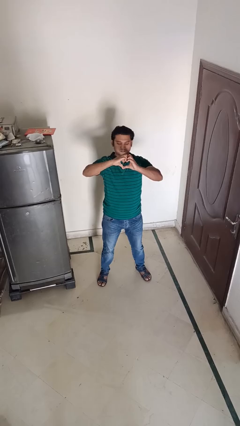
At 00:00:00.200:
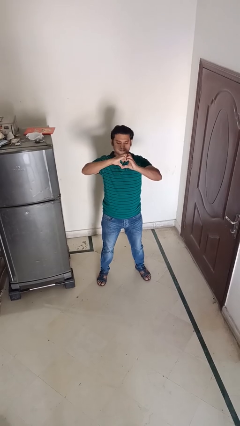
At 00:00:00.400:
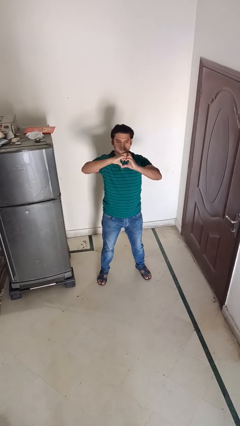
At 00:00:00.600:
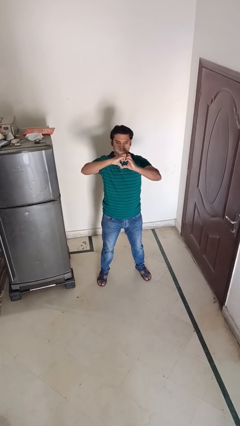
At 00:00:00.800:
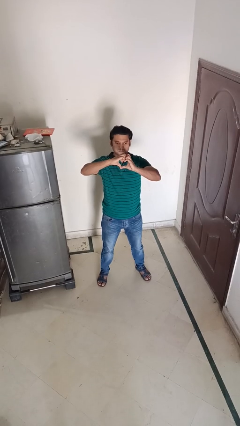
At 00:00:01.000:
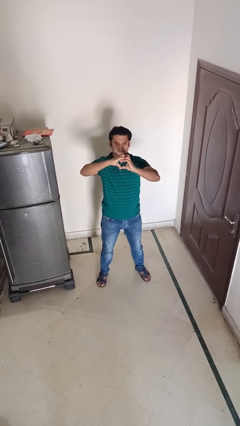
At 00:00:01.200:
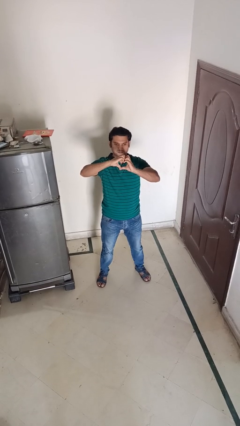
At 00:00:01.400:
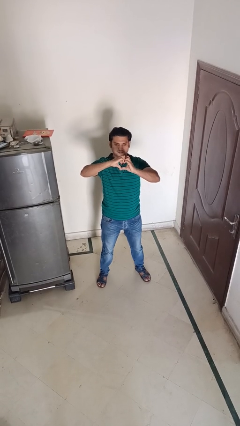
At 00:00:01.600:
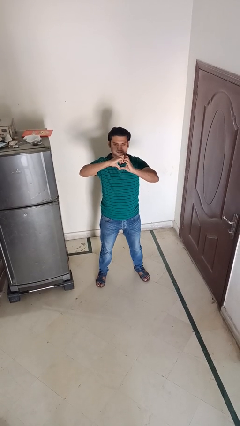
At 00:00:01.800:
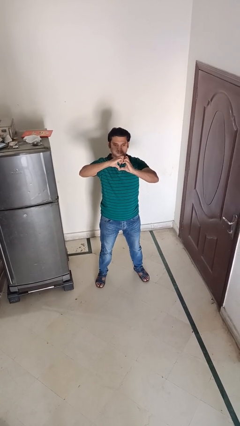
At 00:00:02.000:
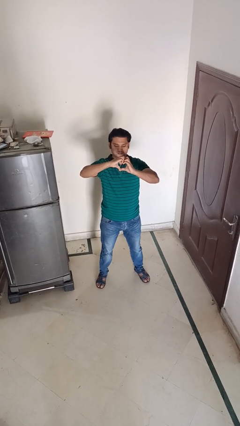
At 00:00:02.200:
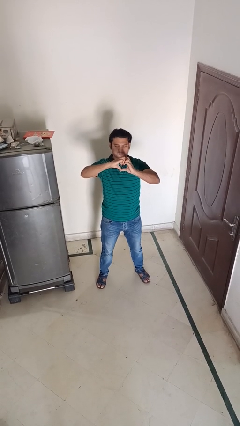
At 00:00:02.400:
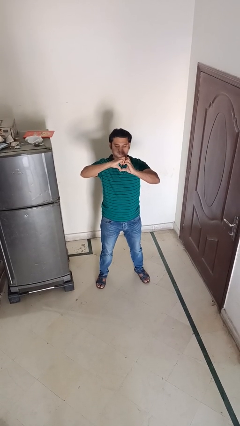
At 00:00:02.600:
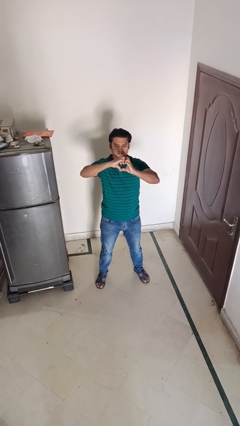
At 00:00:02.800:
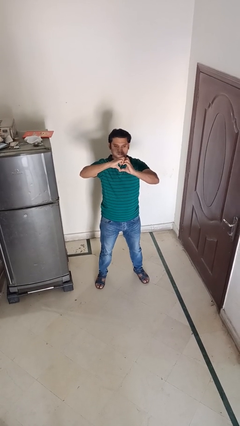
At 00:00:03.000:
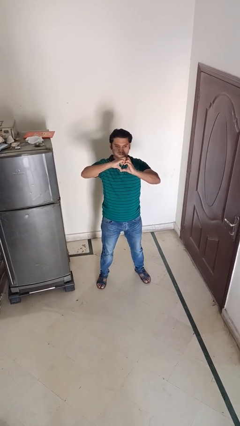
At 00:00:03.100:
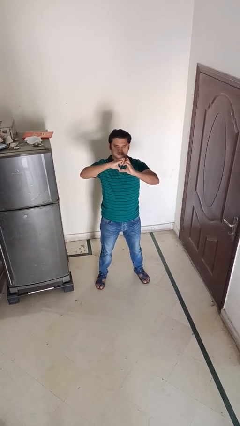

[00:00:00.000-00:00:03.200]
person gestures heart

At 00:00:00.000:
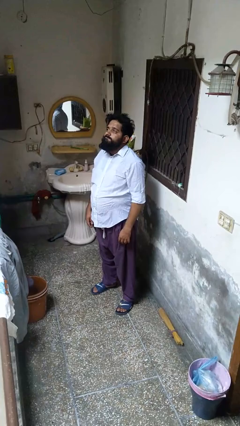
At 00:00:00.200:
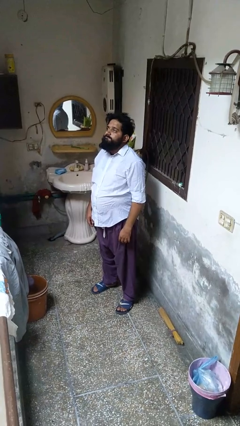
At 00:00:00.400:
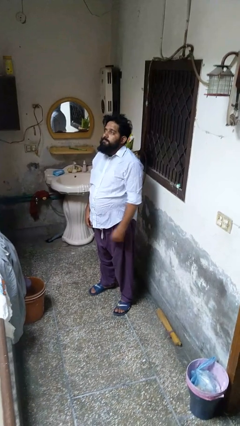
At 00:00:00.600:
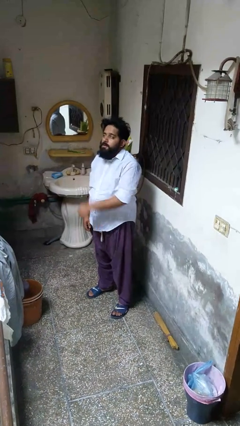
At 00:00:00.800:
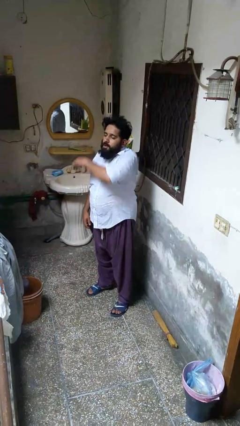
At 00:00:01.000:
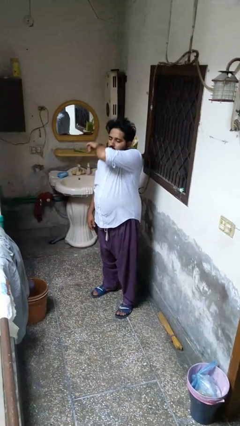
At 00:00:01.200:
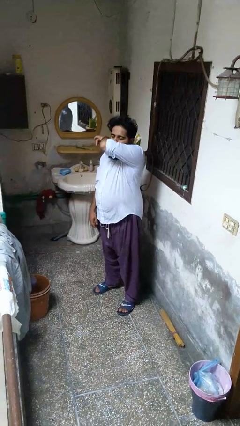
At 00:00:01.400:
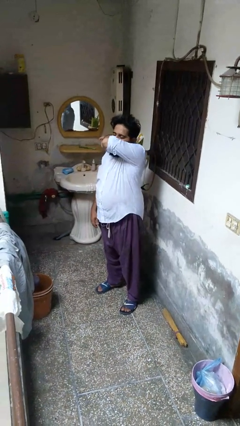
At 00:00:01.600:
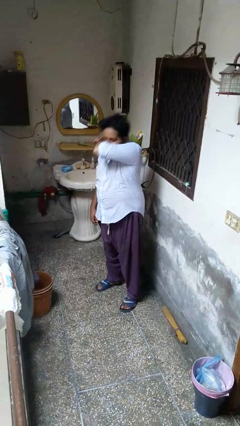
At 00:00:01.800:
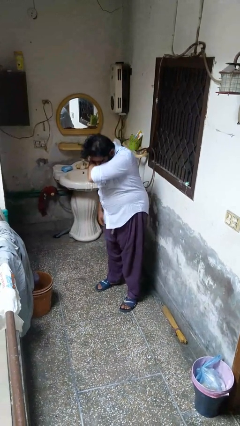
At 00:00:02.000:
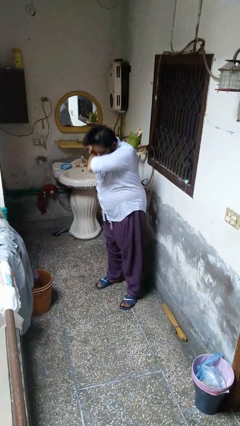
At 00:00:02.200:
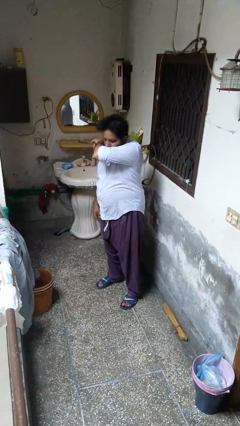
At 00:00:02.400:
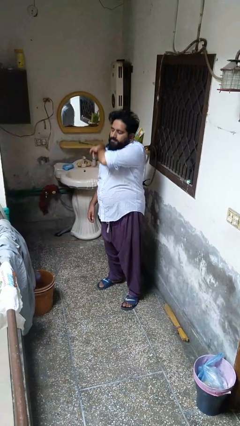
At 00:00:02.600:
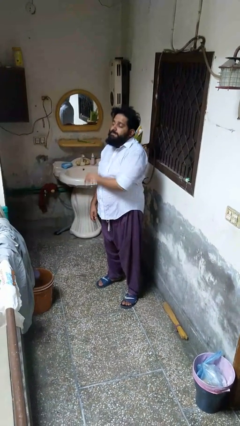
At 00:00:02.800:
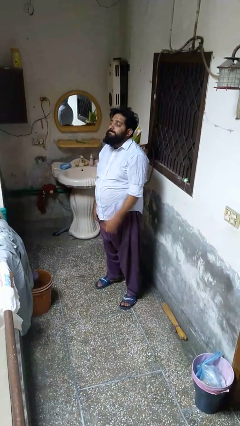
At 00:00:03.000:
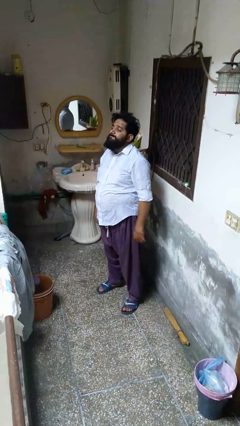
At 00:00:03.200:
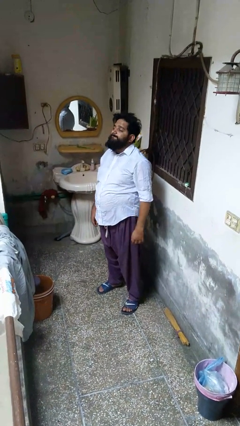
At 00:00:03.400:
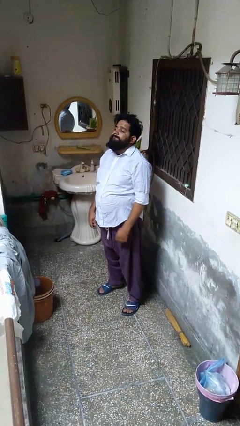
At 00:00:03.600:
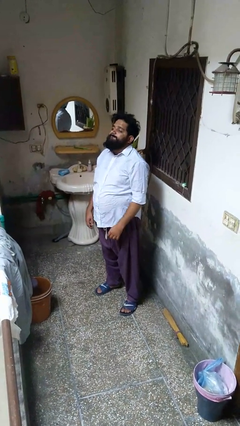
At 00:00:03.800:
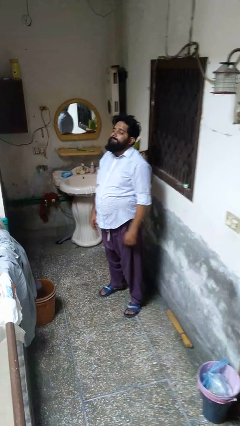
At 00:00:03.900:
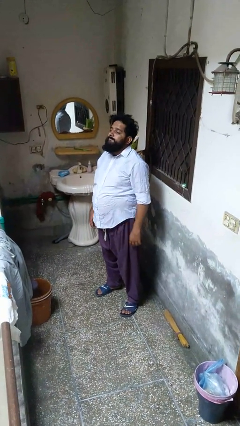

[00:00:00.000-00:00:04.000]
person sneezes into arm

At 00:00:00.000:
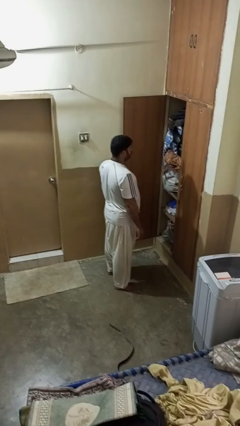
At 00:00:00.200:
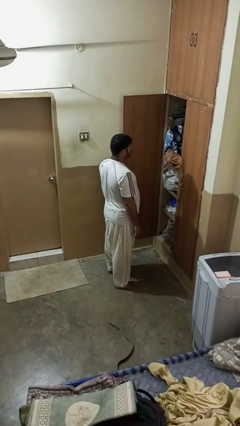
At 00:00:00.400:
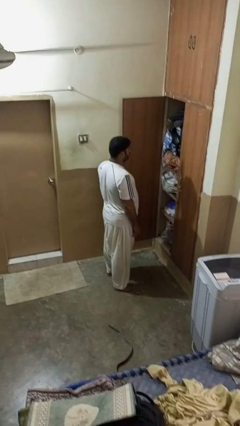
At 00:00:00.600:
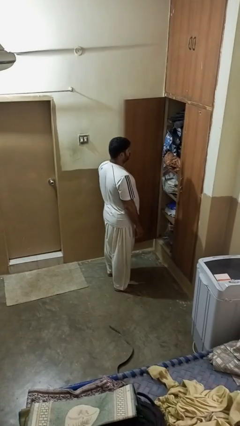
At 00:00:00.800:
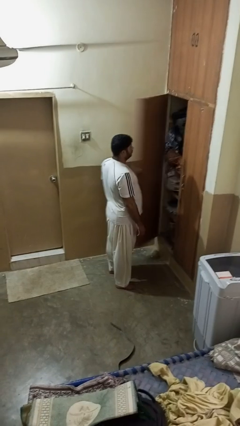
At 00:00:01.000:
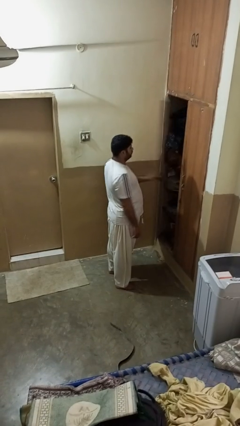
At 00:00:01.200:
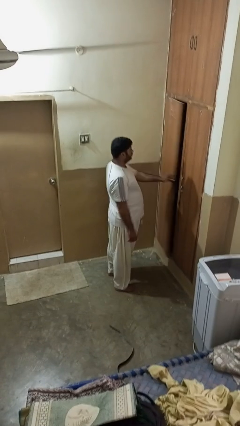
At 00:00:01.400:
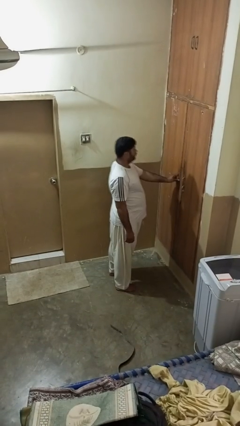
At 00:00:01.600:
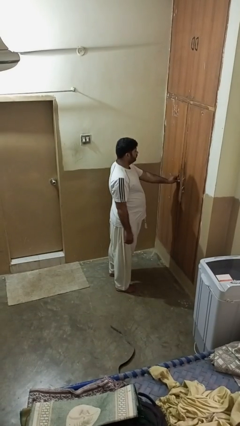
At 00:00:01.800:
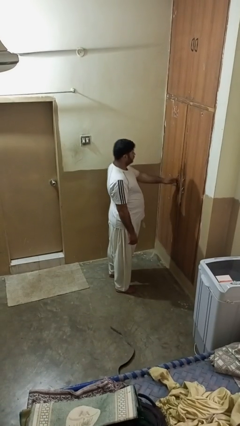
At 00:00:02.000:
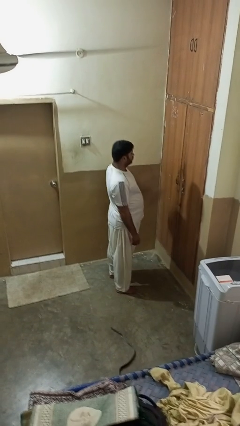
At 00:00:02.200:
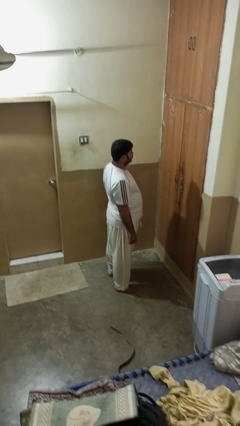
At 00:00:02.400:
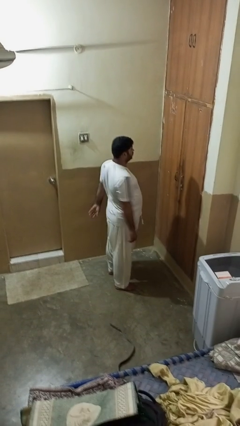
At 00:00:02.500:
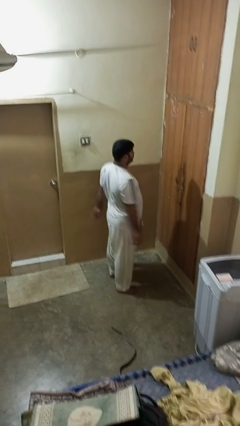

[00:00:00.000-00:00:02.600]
person closes closet door

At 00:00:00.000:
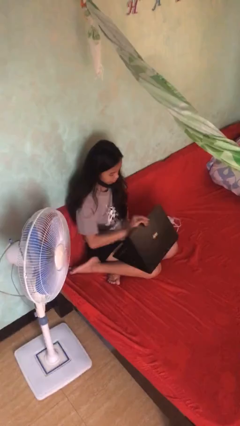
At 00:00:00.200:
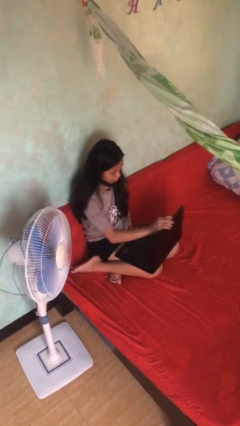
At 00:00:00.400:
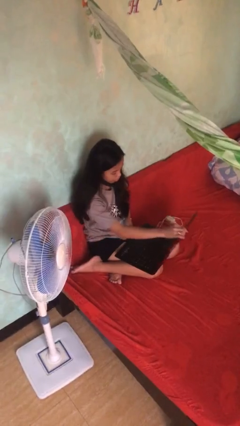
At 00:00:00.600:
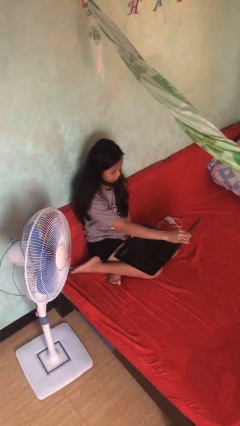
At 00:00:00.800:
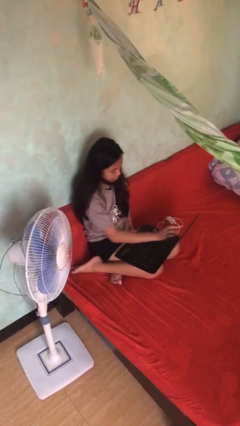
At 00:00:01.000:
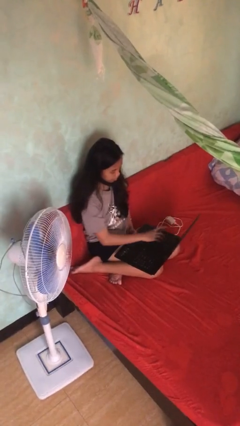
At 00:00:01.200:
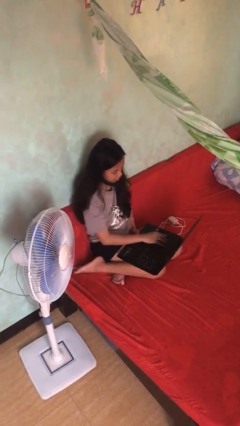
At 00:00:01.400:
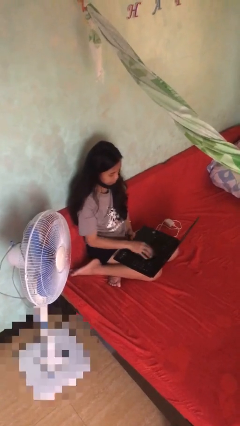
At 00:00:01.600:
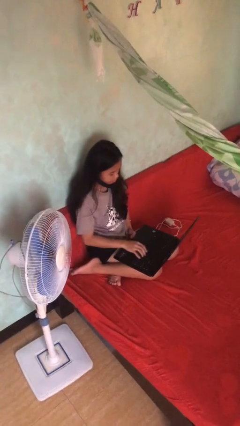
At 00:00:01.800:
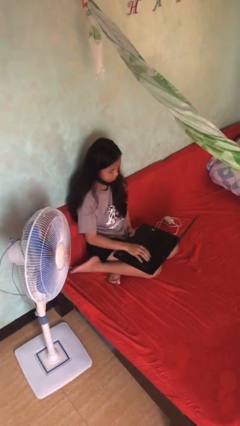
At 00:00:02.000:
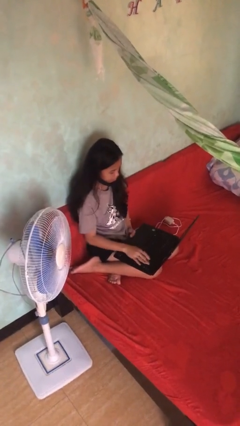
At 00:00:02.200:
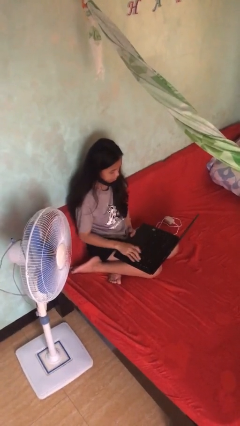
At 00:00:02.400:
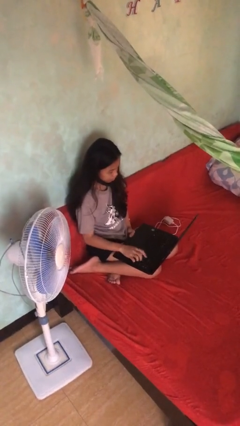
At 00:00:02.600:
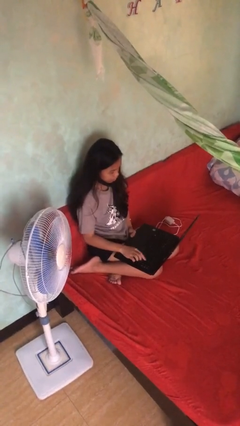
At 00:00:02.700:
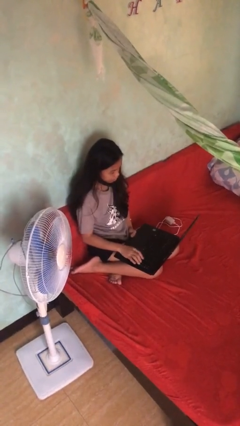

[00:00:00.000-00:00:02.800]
person interacts with laptop

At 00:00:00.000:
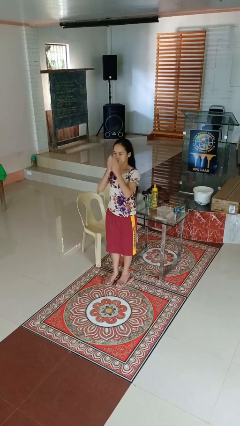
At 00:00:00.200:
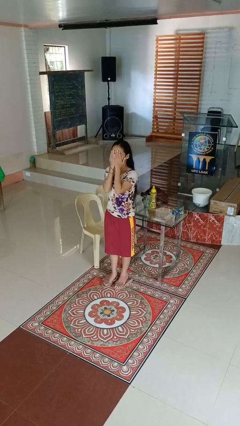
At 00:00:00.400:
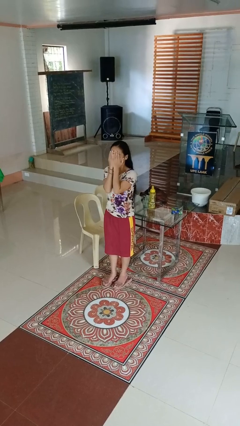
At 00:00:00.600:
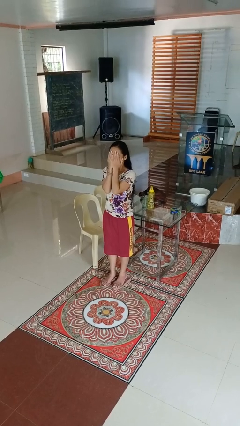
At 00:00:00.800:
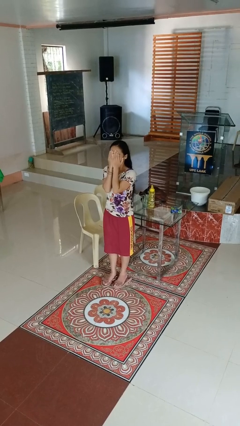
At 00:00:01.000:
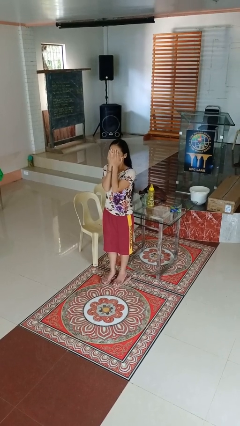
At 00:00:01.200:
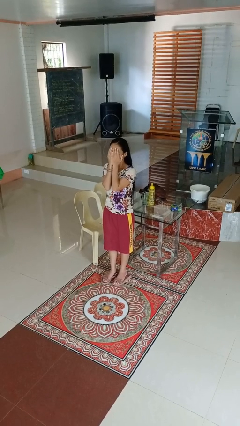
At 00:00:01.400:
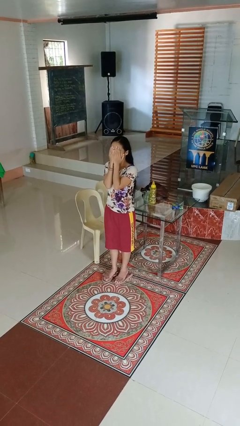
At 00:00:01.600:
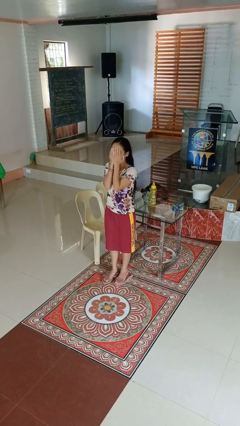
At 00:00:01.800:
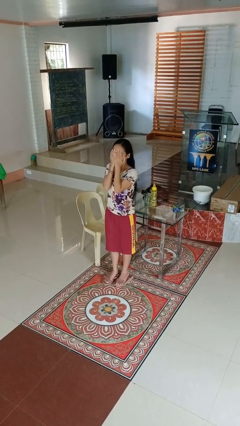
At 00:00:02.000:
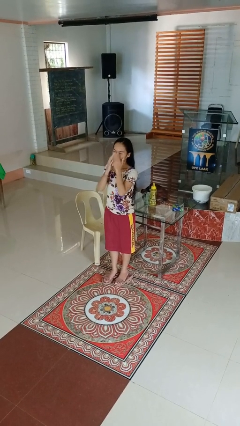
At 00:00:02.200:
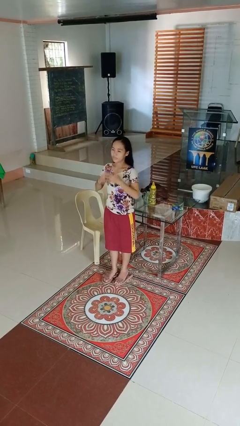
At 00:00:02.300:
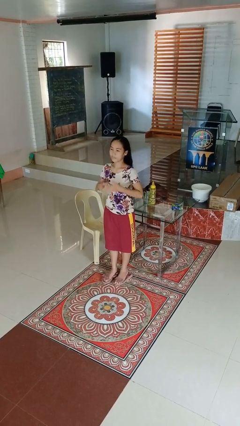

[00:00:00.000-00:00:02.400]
person covers face with hands

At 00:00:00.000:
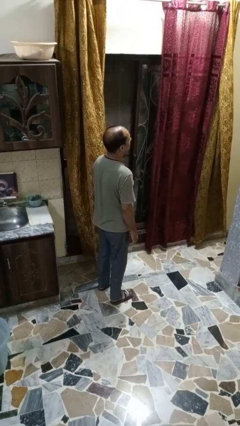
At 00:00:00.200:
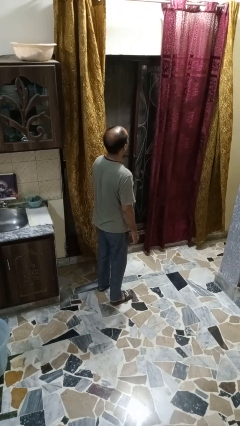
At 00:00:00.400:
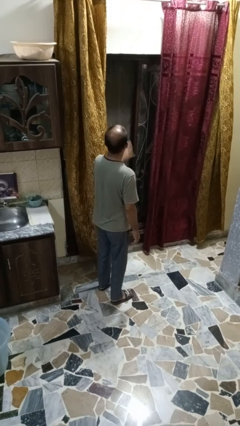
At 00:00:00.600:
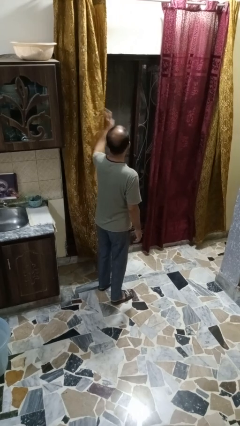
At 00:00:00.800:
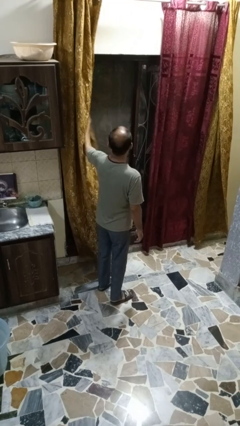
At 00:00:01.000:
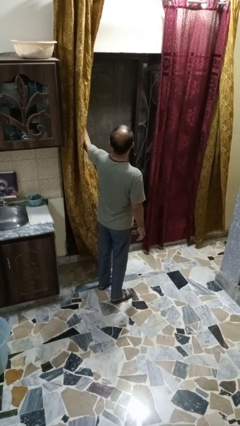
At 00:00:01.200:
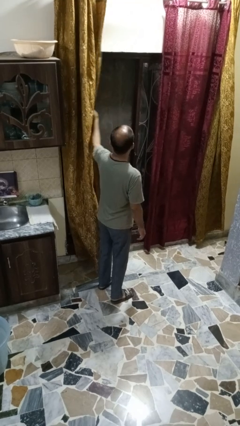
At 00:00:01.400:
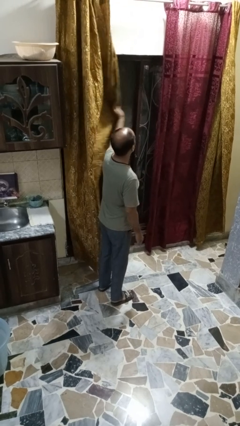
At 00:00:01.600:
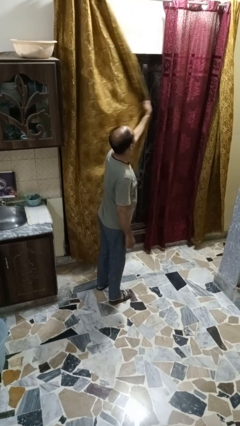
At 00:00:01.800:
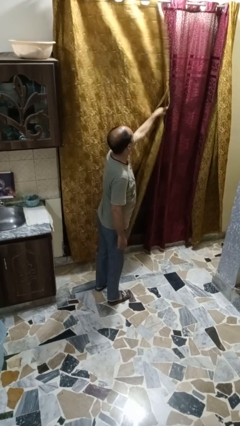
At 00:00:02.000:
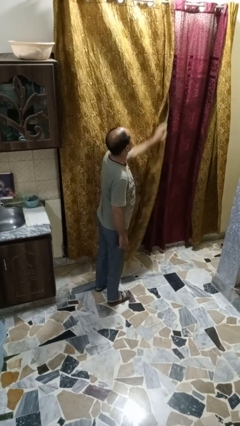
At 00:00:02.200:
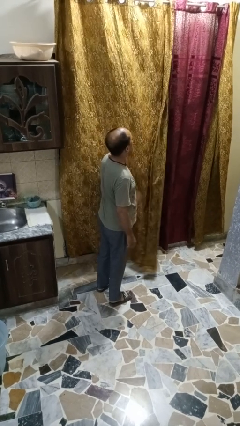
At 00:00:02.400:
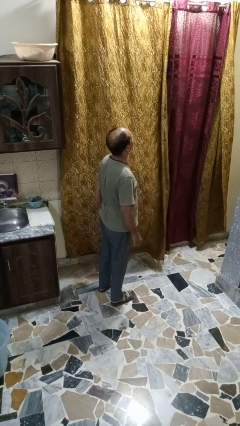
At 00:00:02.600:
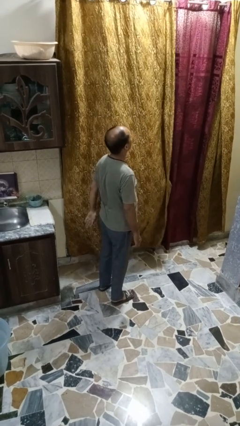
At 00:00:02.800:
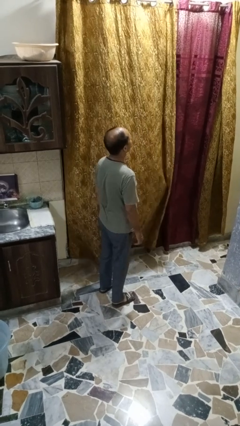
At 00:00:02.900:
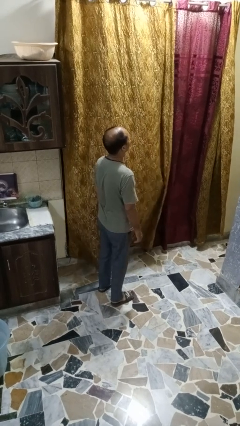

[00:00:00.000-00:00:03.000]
person closes curtains
